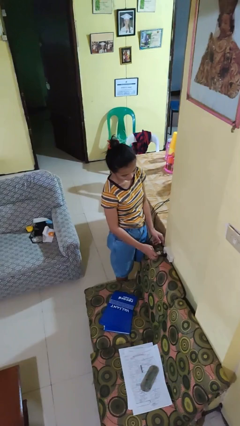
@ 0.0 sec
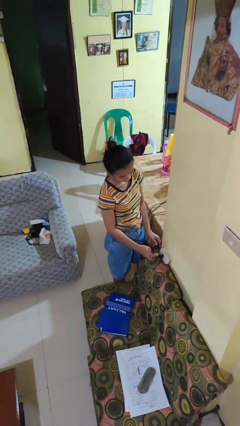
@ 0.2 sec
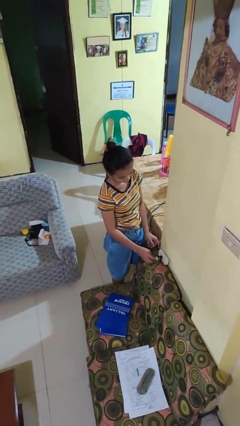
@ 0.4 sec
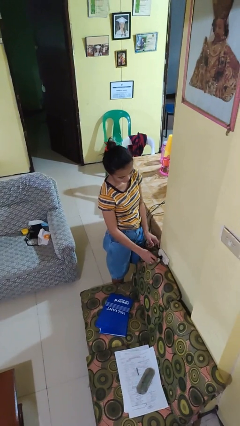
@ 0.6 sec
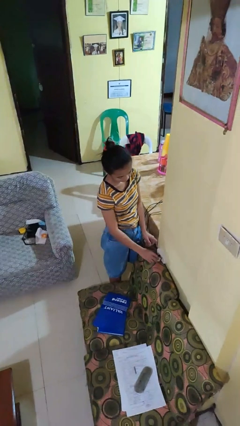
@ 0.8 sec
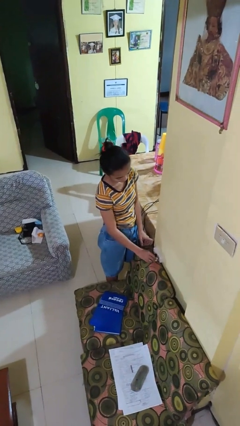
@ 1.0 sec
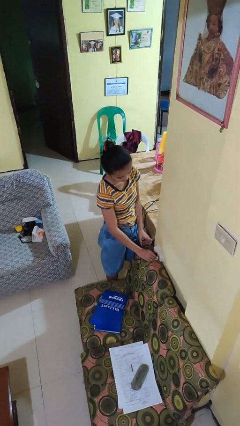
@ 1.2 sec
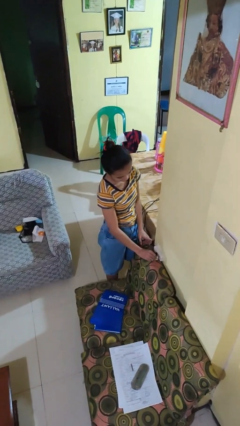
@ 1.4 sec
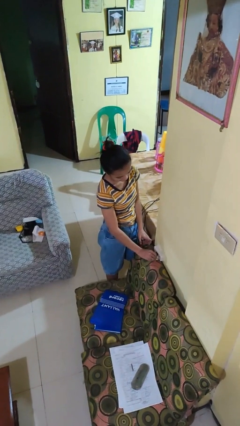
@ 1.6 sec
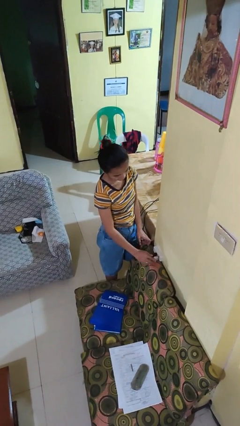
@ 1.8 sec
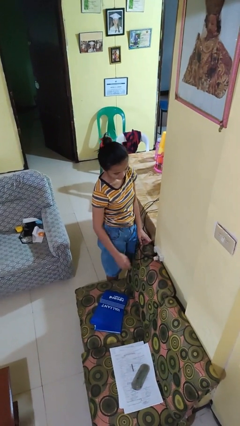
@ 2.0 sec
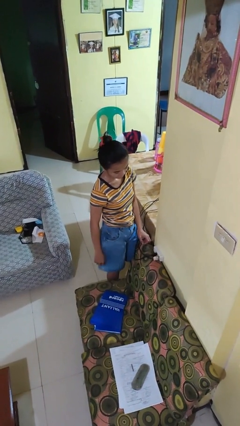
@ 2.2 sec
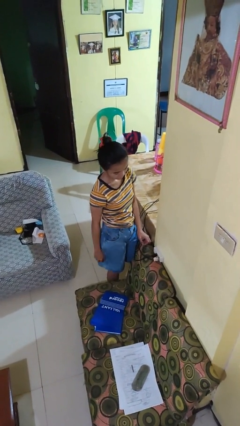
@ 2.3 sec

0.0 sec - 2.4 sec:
person plugs into electrical socket

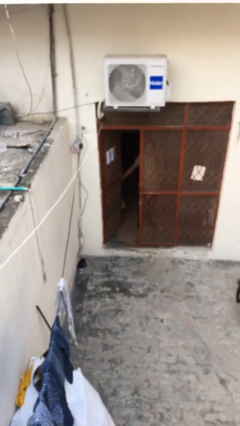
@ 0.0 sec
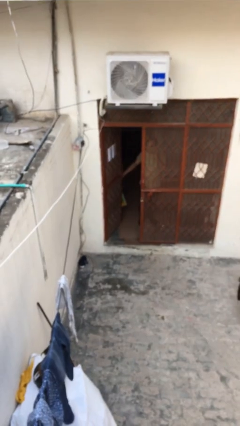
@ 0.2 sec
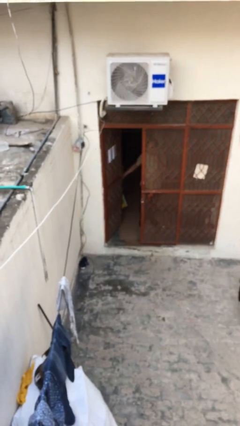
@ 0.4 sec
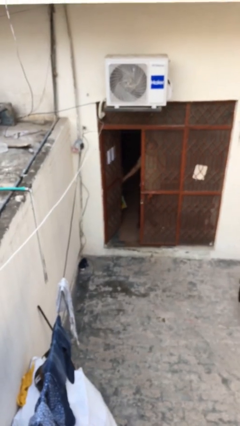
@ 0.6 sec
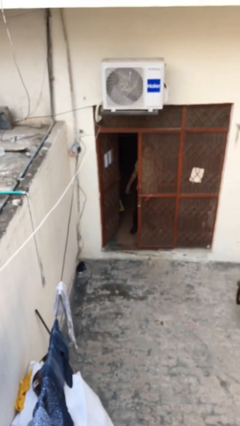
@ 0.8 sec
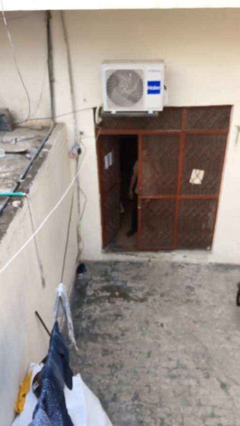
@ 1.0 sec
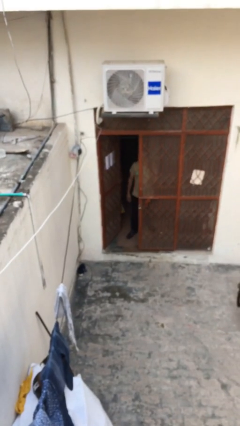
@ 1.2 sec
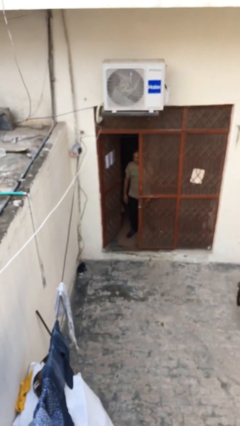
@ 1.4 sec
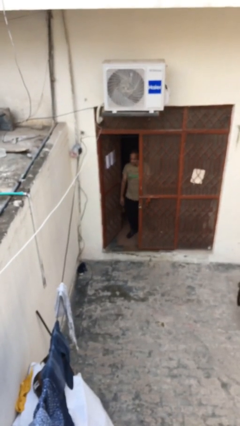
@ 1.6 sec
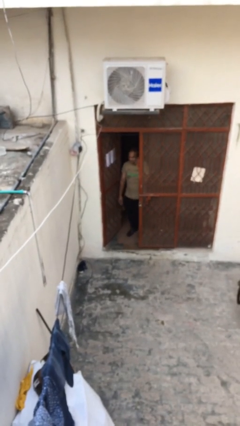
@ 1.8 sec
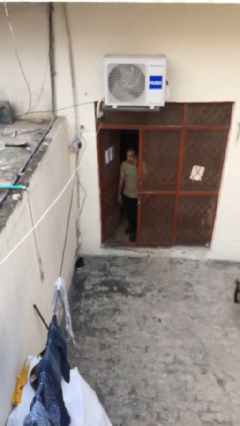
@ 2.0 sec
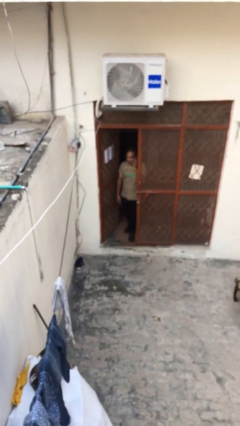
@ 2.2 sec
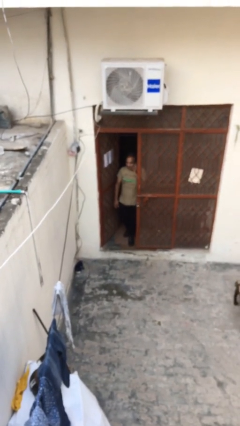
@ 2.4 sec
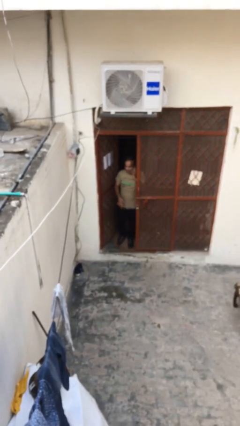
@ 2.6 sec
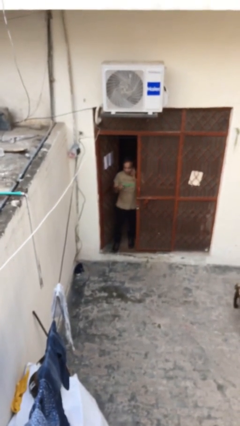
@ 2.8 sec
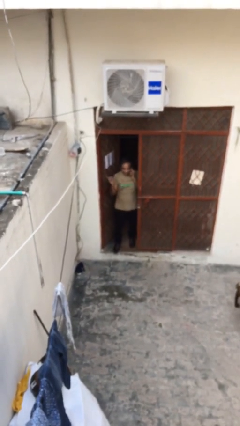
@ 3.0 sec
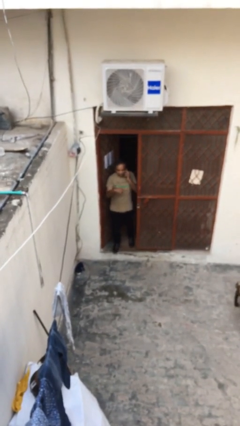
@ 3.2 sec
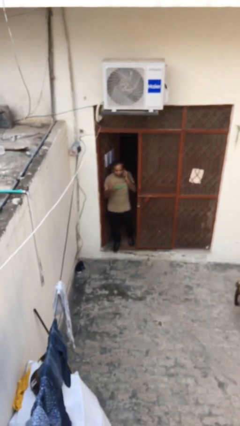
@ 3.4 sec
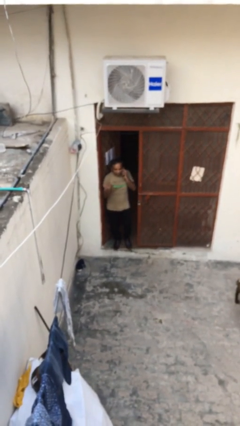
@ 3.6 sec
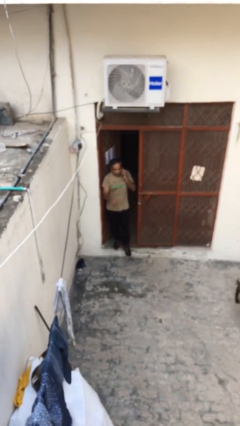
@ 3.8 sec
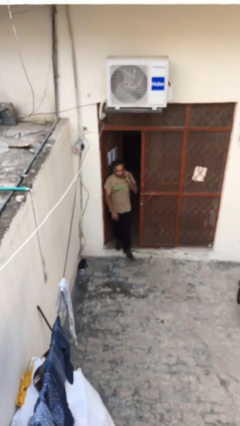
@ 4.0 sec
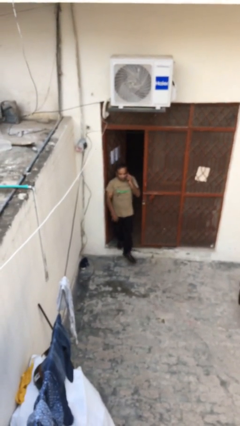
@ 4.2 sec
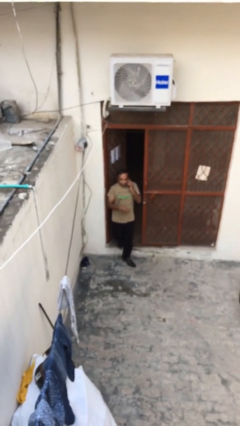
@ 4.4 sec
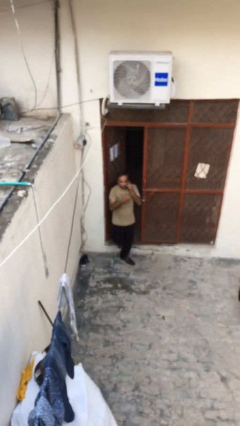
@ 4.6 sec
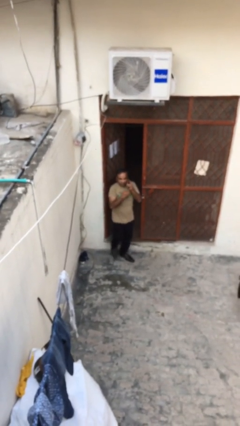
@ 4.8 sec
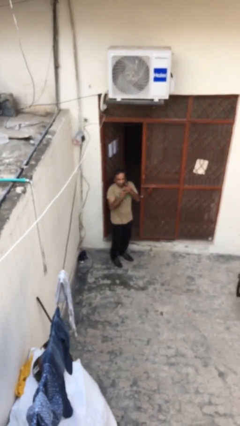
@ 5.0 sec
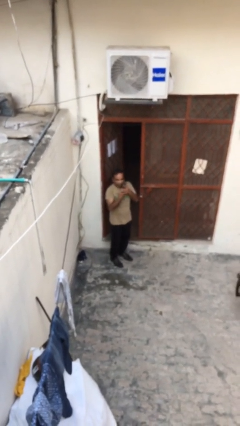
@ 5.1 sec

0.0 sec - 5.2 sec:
person enters scene through structure

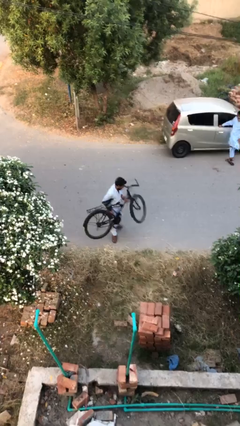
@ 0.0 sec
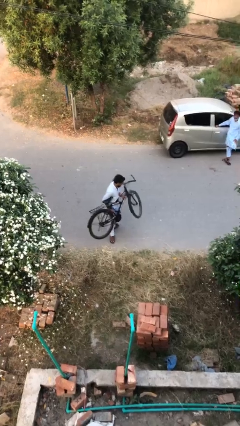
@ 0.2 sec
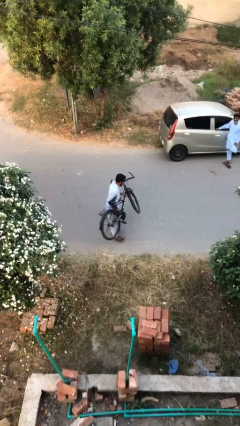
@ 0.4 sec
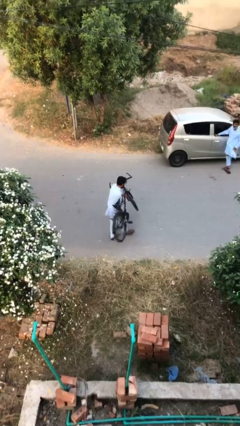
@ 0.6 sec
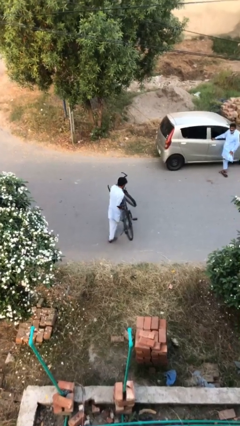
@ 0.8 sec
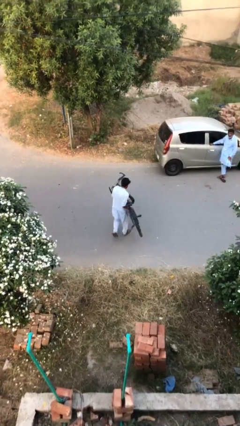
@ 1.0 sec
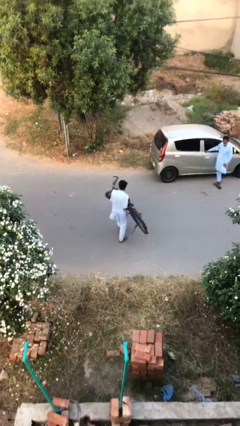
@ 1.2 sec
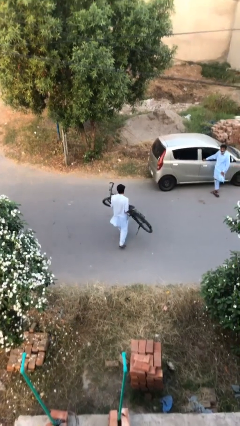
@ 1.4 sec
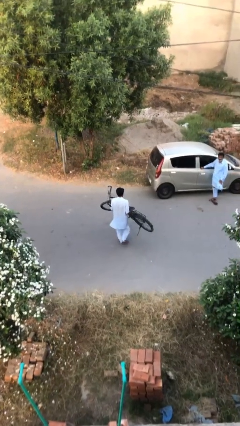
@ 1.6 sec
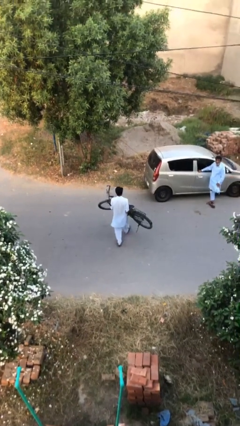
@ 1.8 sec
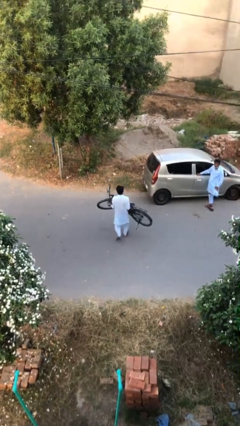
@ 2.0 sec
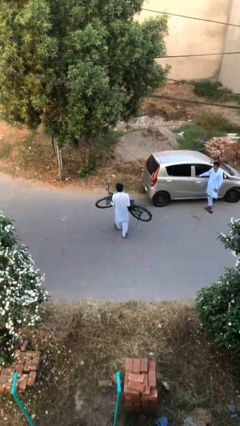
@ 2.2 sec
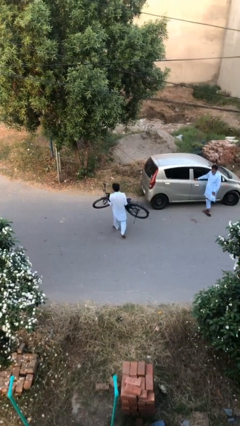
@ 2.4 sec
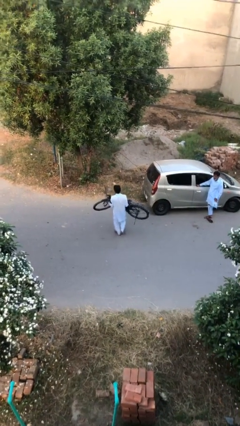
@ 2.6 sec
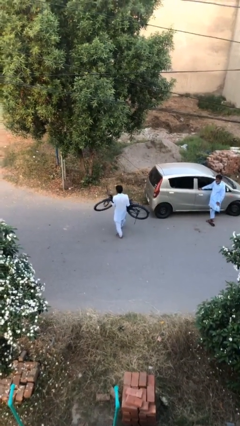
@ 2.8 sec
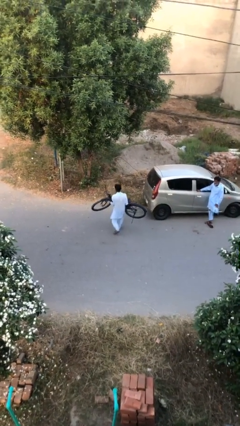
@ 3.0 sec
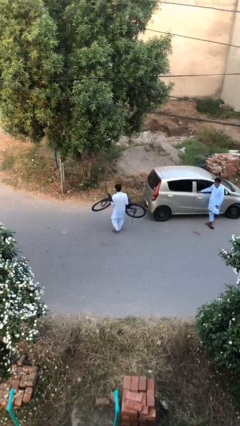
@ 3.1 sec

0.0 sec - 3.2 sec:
person carries heavy object

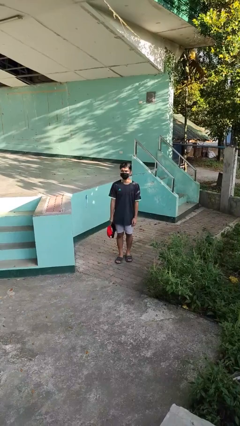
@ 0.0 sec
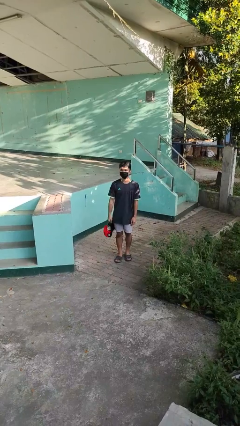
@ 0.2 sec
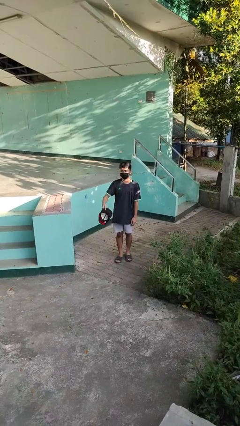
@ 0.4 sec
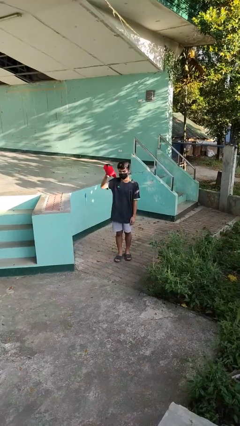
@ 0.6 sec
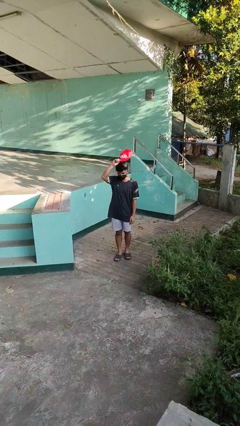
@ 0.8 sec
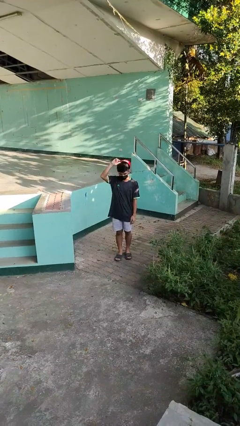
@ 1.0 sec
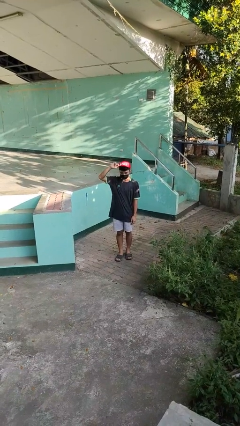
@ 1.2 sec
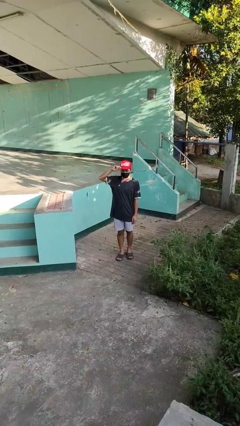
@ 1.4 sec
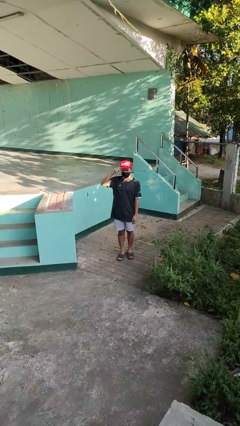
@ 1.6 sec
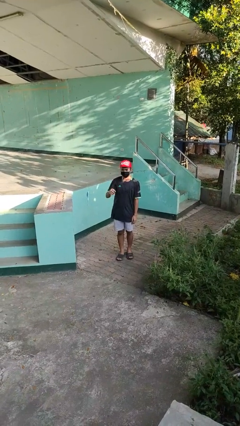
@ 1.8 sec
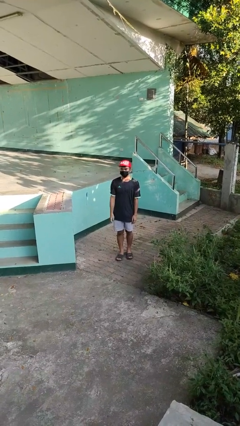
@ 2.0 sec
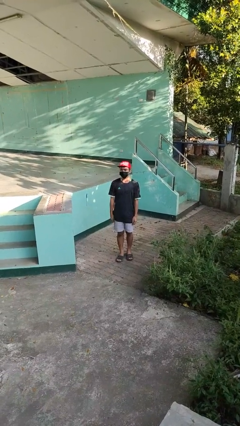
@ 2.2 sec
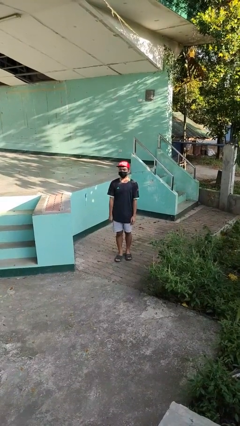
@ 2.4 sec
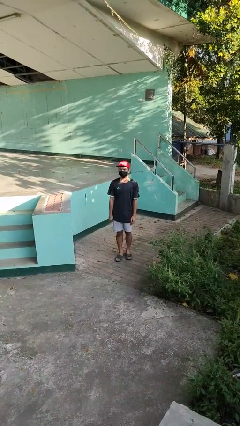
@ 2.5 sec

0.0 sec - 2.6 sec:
person puts on hat

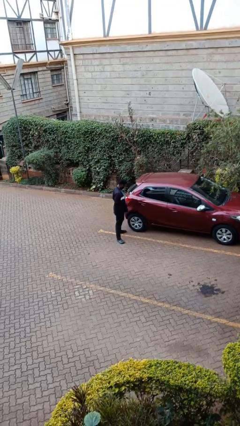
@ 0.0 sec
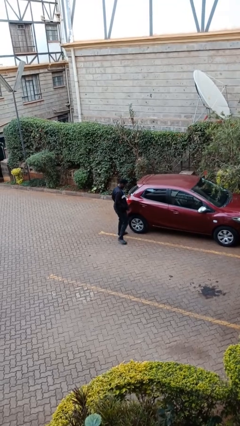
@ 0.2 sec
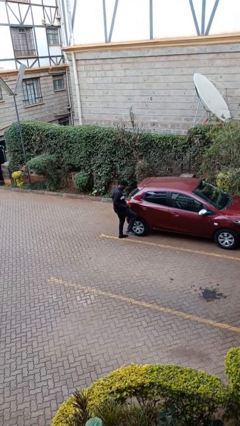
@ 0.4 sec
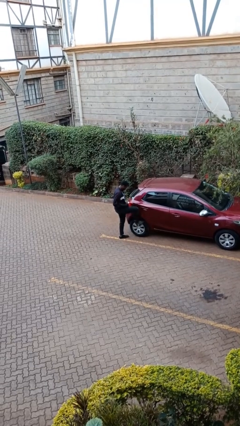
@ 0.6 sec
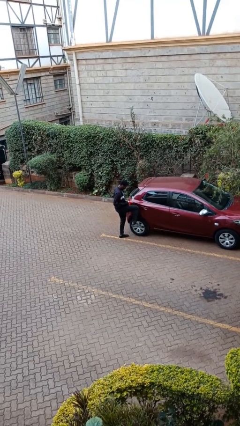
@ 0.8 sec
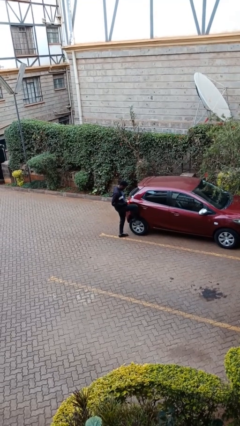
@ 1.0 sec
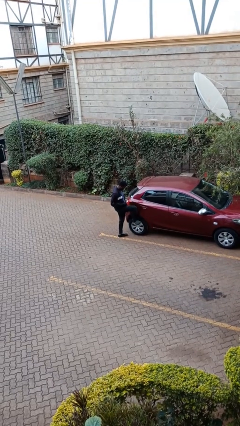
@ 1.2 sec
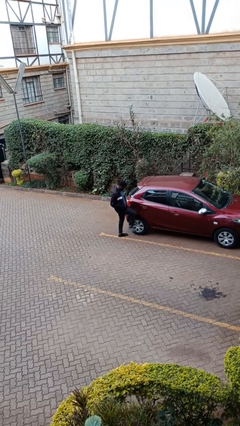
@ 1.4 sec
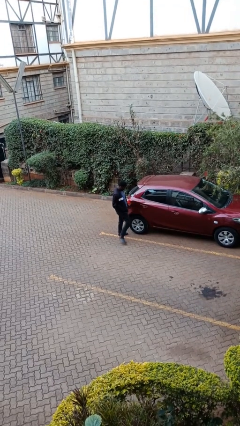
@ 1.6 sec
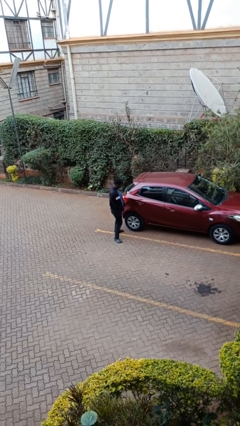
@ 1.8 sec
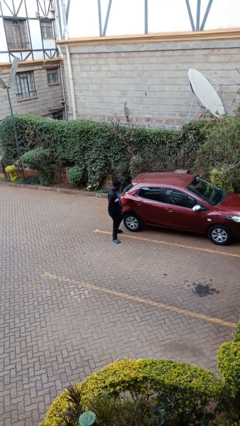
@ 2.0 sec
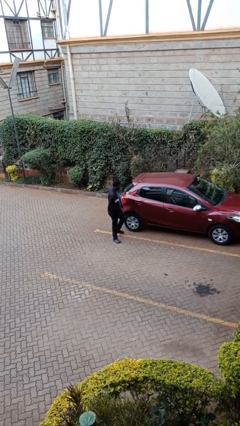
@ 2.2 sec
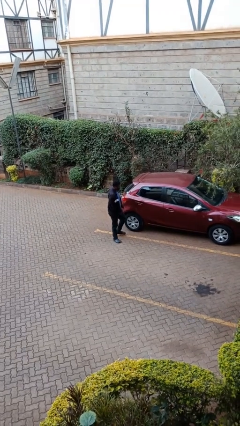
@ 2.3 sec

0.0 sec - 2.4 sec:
person kicks car tires

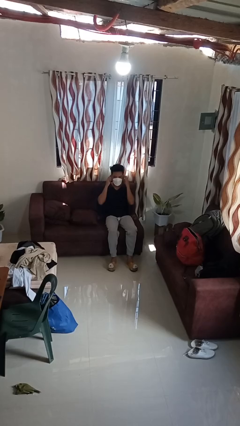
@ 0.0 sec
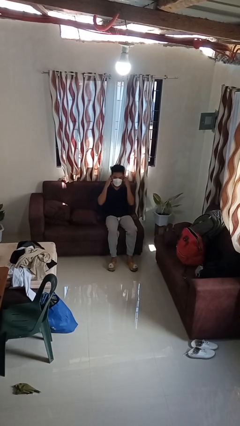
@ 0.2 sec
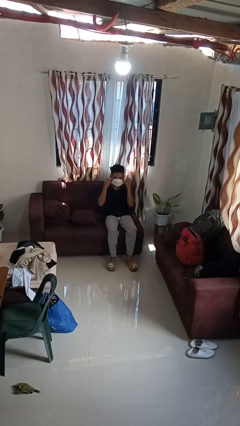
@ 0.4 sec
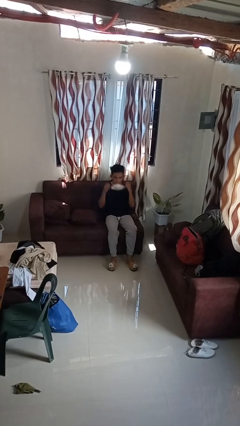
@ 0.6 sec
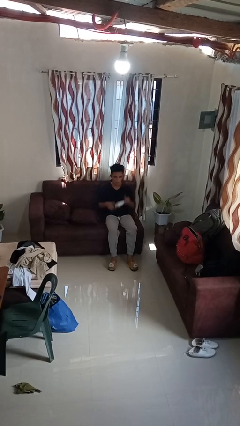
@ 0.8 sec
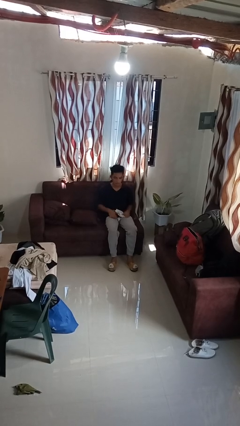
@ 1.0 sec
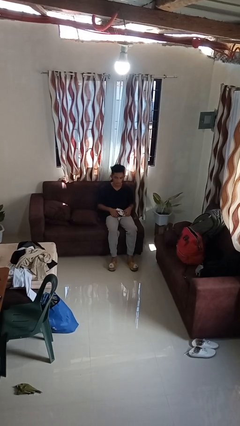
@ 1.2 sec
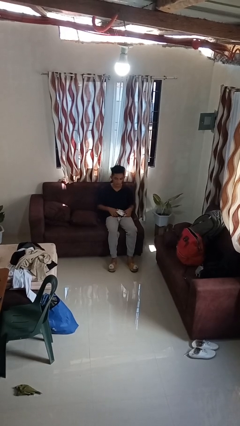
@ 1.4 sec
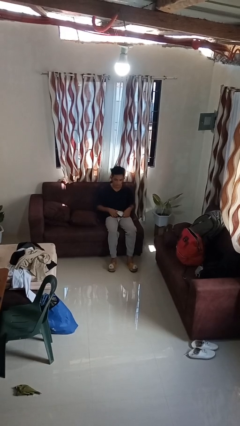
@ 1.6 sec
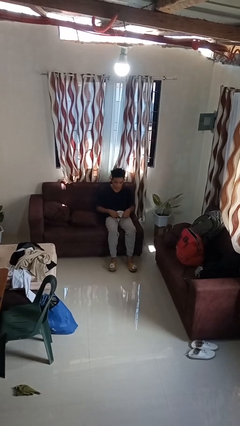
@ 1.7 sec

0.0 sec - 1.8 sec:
person takes off facemask
